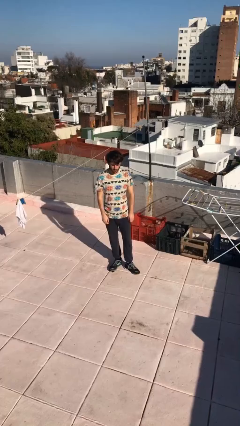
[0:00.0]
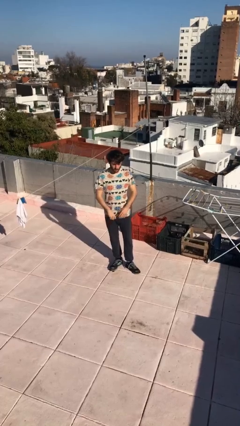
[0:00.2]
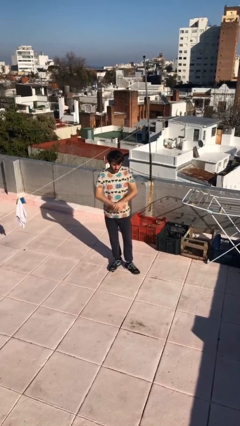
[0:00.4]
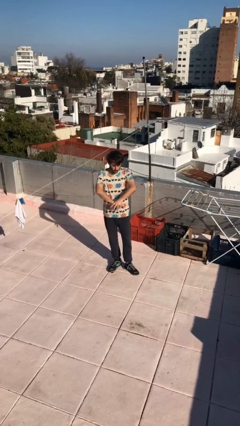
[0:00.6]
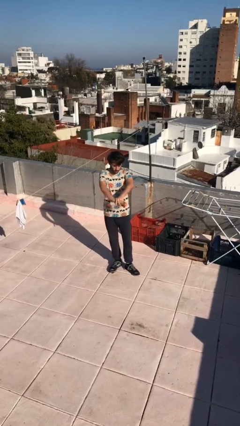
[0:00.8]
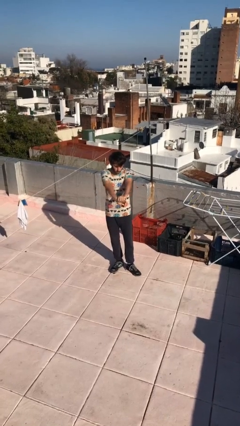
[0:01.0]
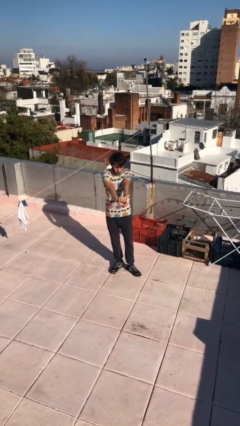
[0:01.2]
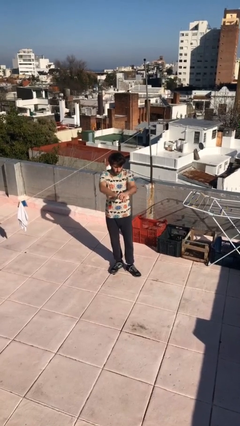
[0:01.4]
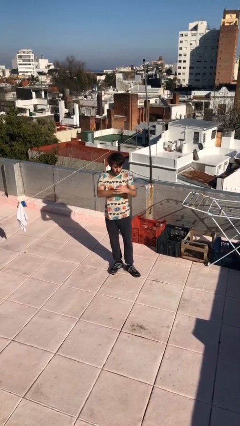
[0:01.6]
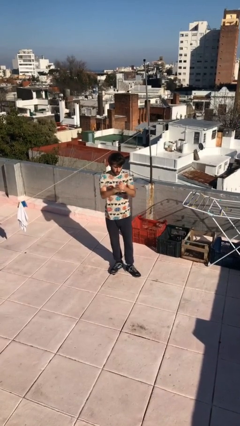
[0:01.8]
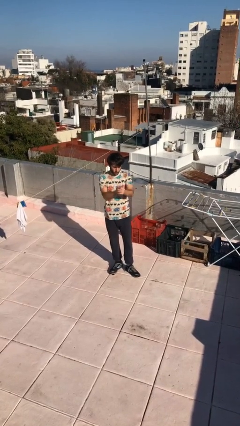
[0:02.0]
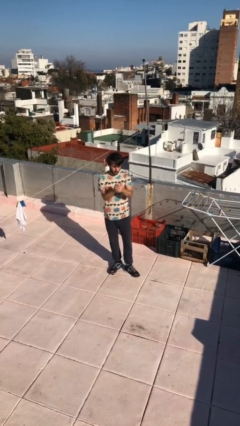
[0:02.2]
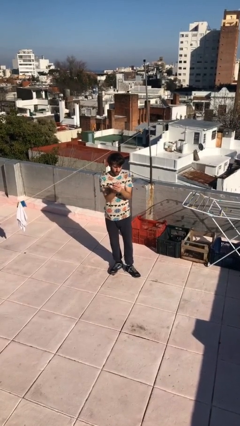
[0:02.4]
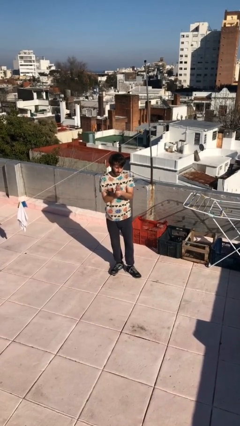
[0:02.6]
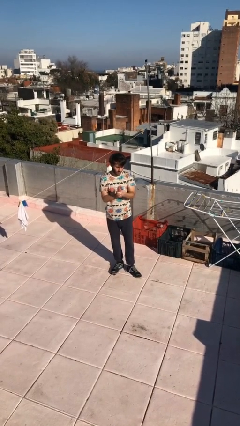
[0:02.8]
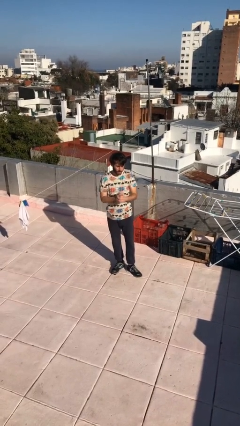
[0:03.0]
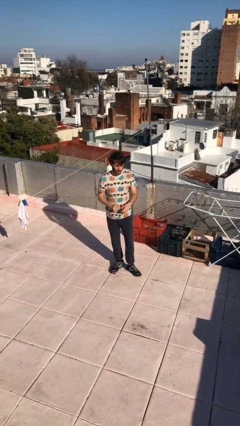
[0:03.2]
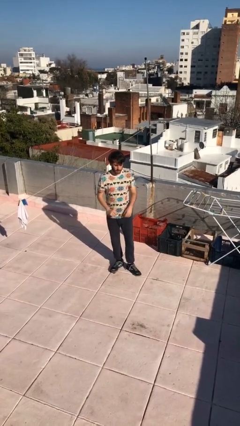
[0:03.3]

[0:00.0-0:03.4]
person cracks knuckles

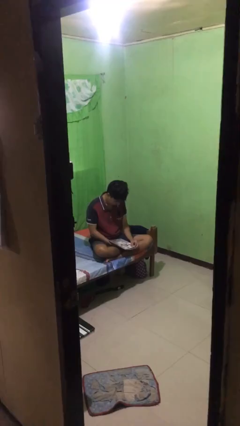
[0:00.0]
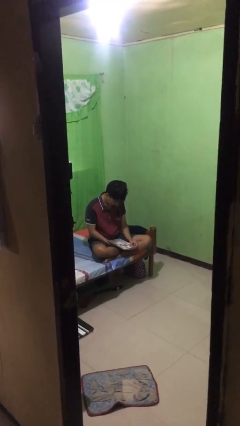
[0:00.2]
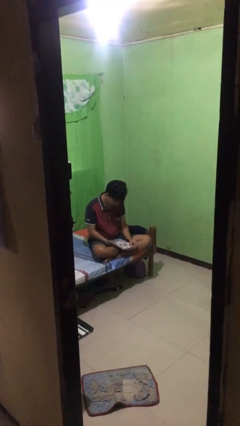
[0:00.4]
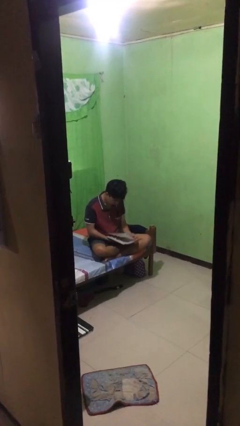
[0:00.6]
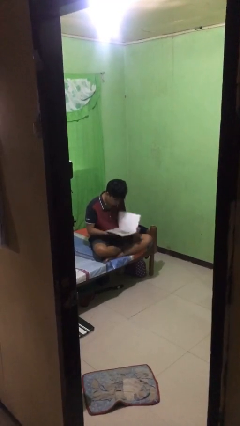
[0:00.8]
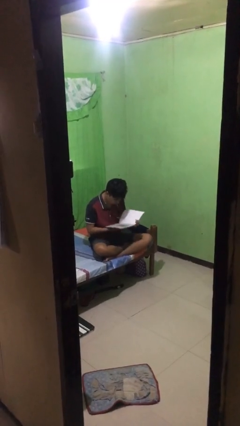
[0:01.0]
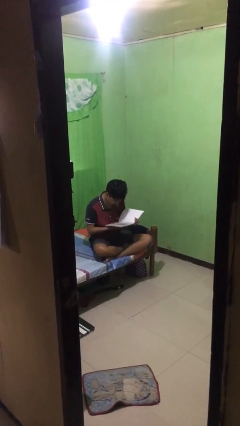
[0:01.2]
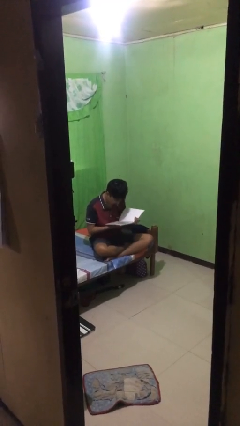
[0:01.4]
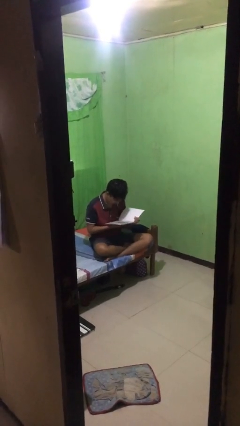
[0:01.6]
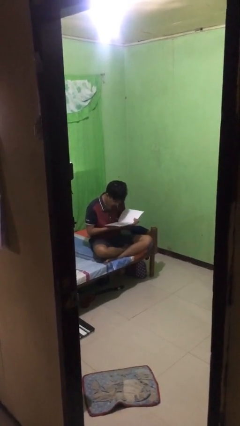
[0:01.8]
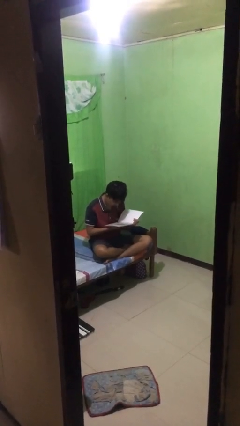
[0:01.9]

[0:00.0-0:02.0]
person reads document

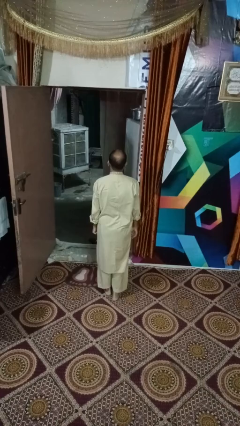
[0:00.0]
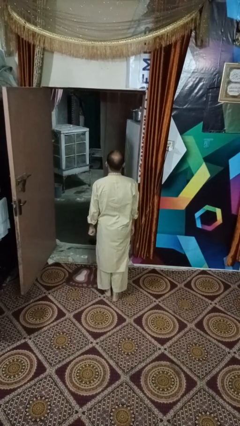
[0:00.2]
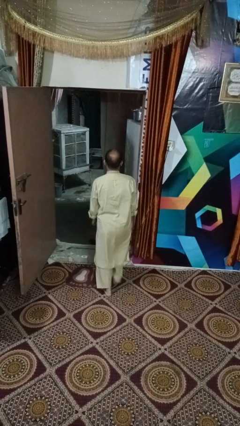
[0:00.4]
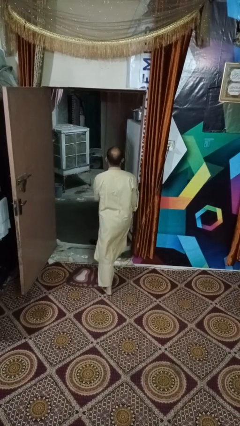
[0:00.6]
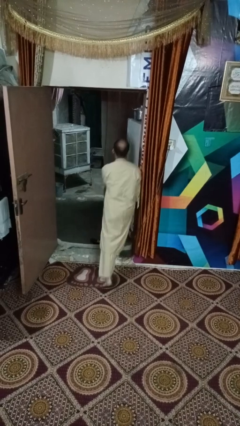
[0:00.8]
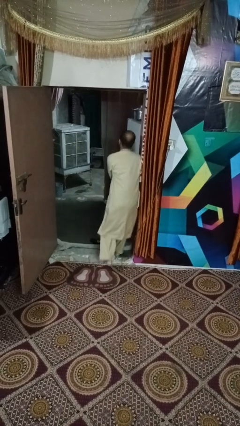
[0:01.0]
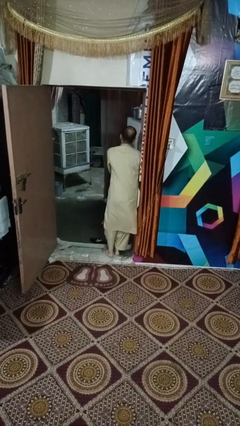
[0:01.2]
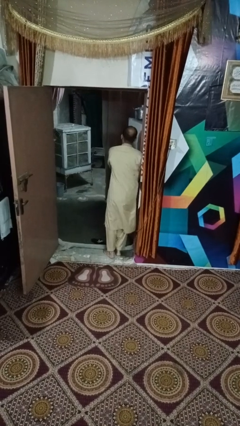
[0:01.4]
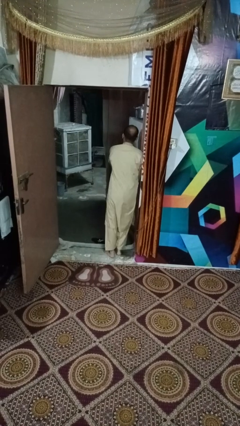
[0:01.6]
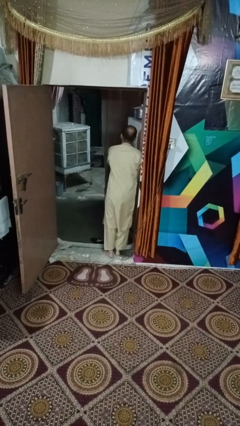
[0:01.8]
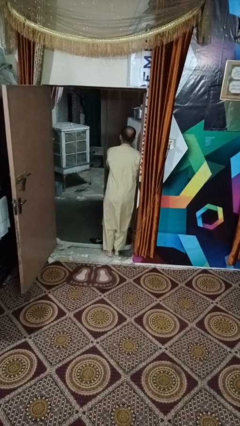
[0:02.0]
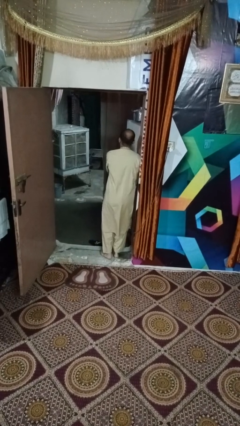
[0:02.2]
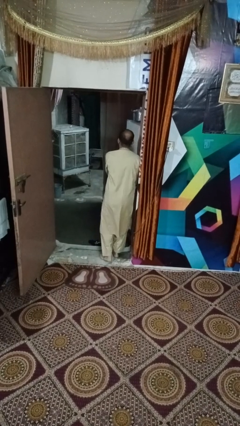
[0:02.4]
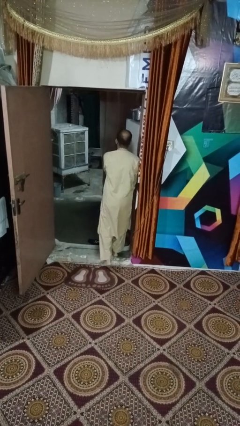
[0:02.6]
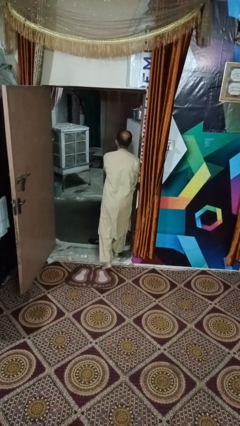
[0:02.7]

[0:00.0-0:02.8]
person bumps into wall

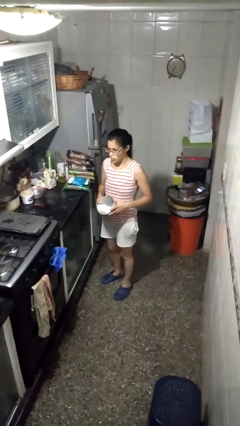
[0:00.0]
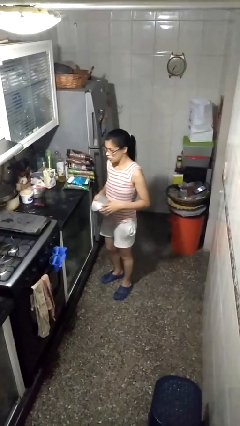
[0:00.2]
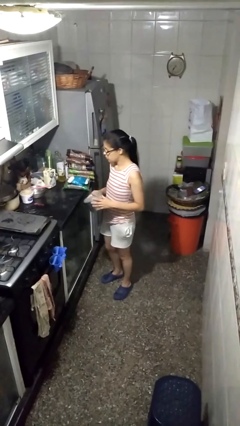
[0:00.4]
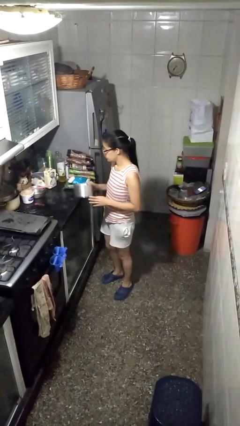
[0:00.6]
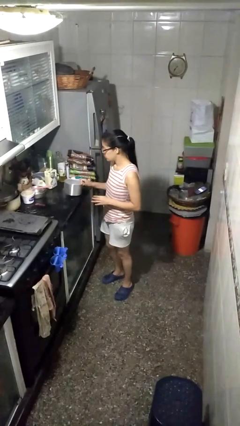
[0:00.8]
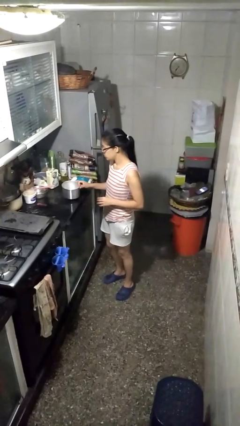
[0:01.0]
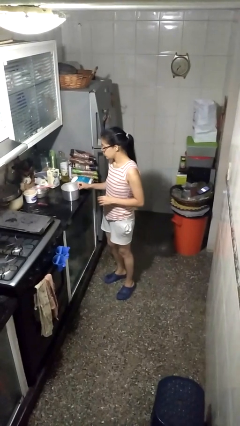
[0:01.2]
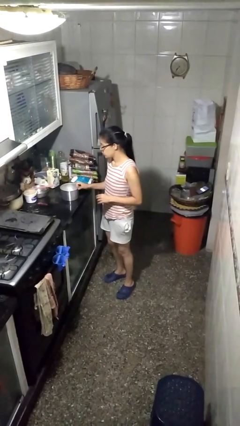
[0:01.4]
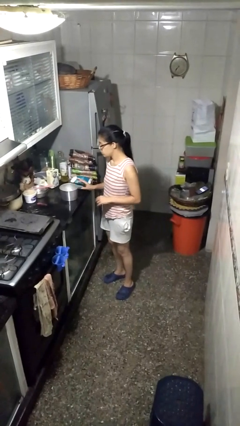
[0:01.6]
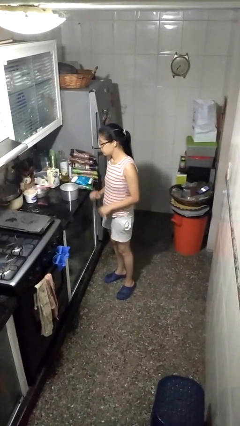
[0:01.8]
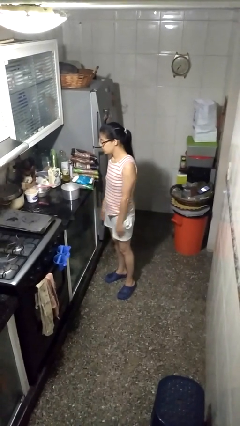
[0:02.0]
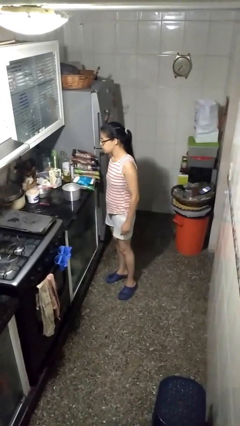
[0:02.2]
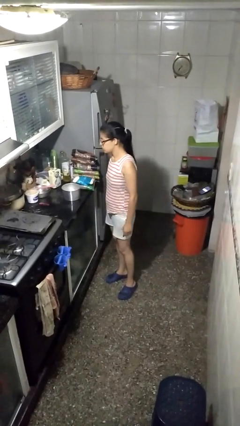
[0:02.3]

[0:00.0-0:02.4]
person puts down object on countertop

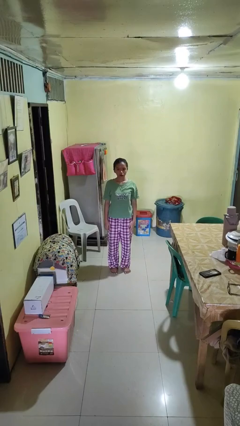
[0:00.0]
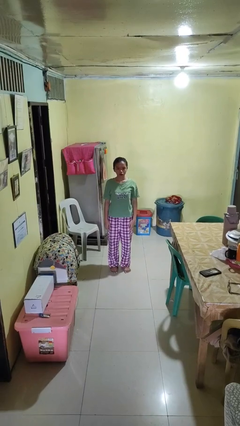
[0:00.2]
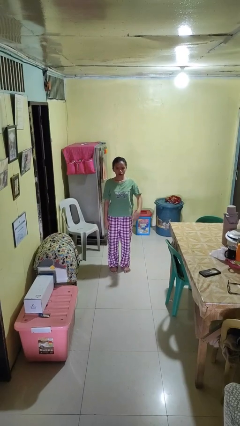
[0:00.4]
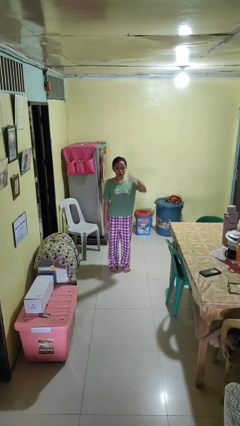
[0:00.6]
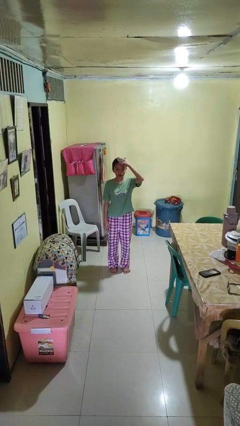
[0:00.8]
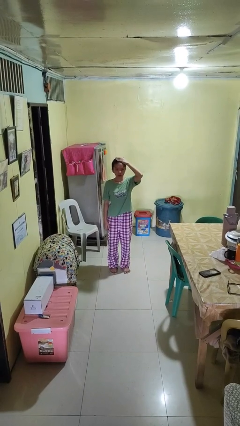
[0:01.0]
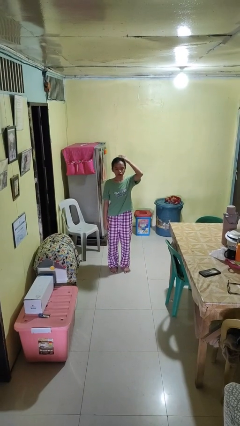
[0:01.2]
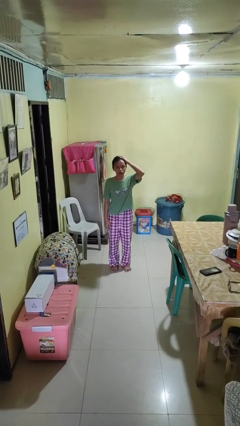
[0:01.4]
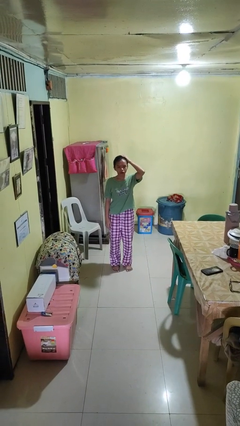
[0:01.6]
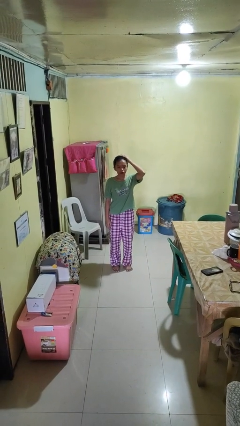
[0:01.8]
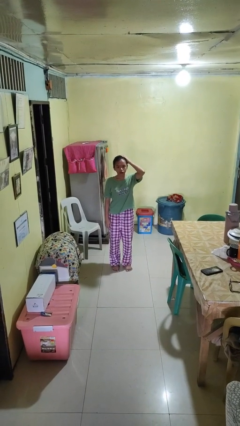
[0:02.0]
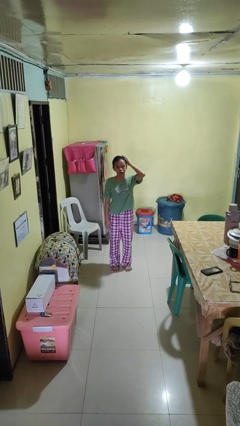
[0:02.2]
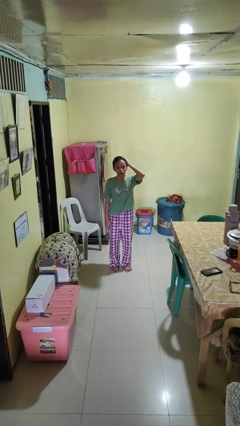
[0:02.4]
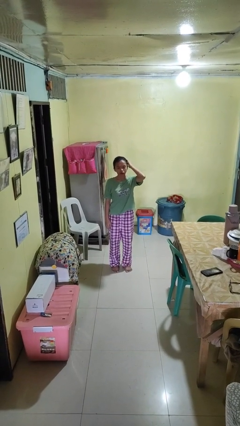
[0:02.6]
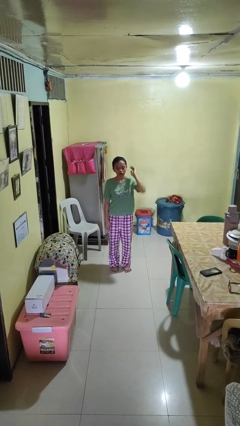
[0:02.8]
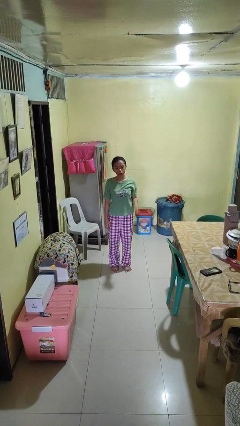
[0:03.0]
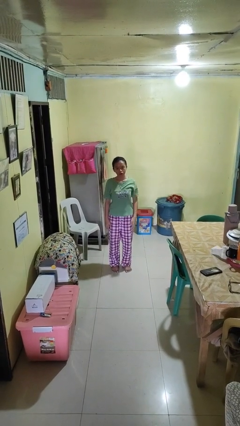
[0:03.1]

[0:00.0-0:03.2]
person pats head

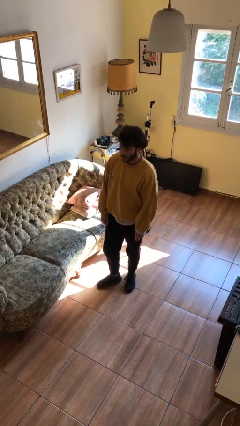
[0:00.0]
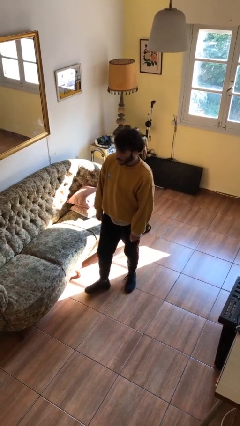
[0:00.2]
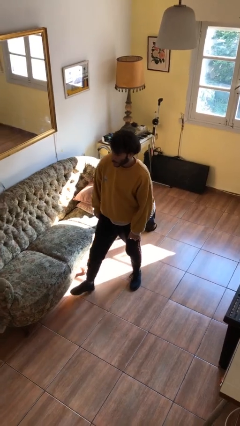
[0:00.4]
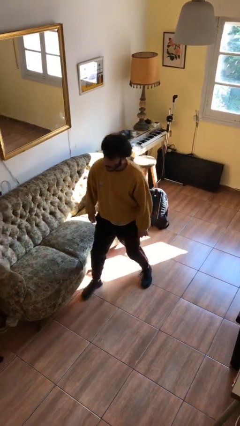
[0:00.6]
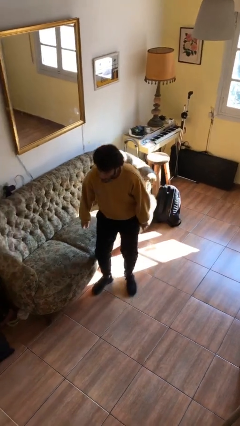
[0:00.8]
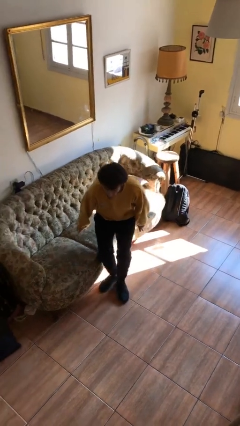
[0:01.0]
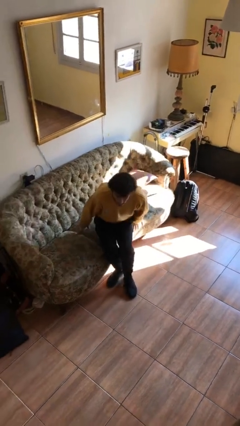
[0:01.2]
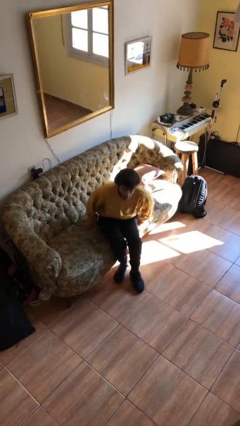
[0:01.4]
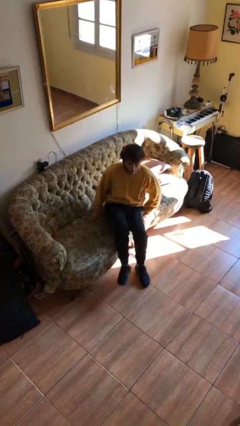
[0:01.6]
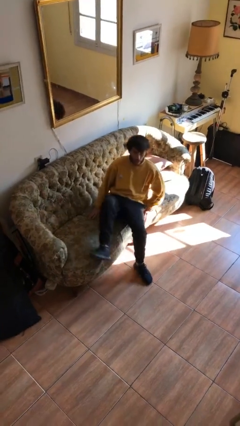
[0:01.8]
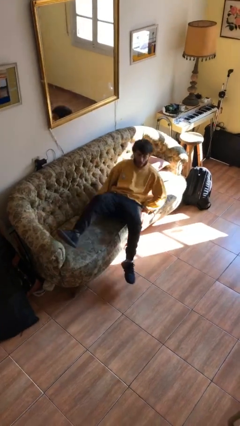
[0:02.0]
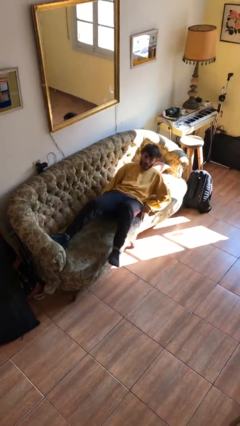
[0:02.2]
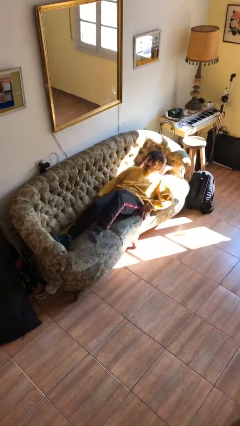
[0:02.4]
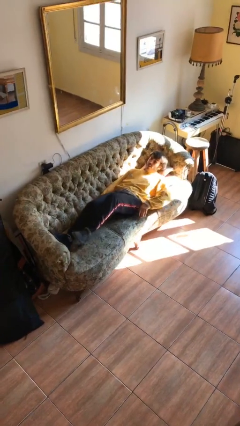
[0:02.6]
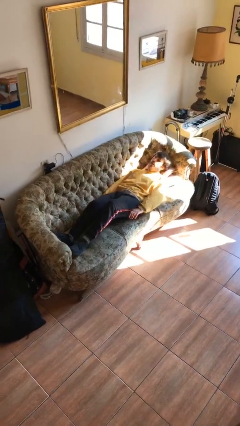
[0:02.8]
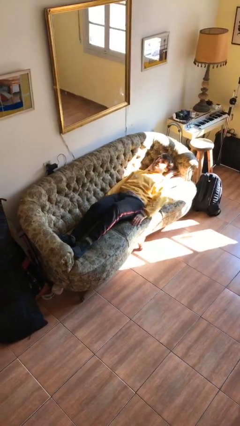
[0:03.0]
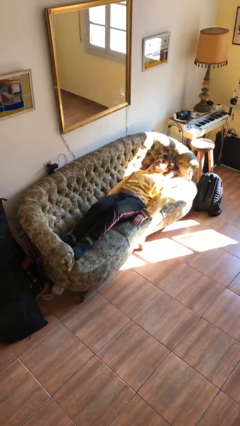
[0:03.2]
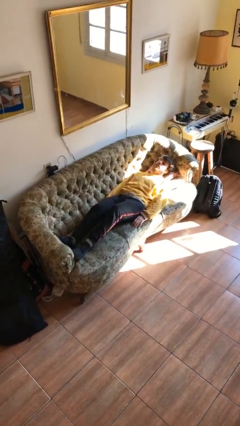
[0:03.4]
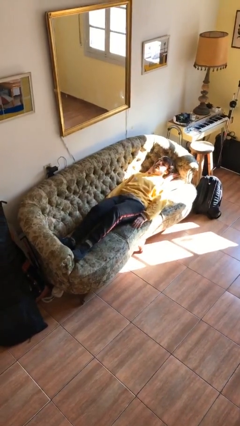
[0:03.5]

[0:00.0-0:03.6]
person lies down on couch
